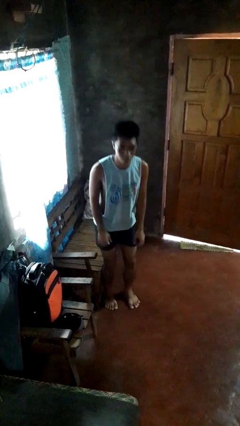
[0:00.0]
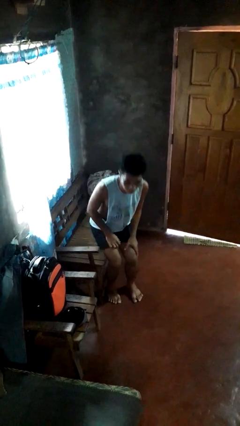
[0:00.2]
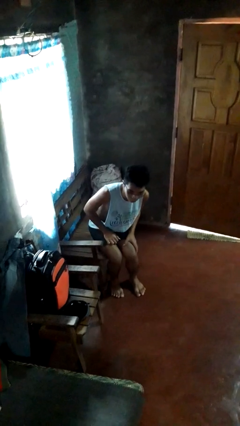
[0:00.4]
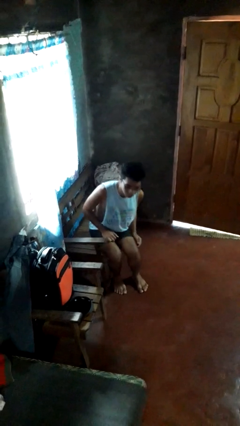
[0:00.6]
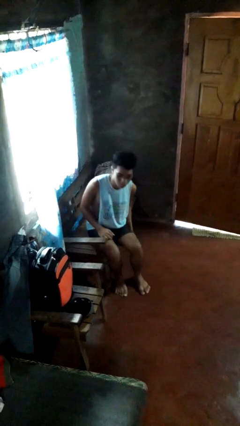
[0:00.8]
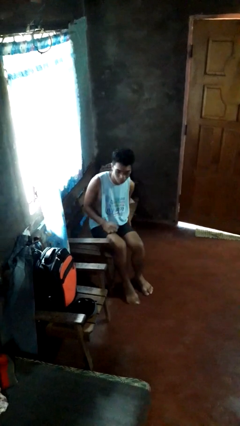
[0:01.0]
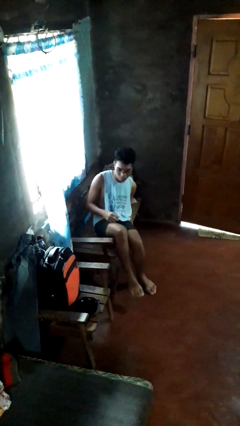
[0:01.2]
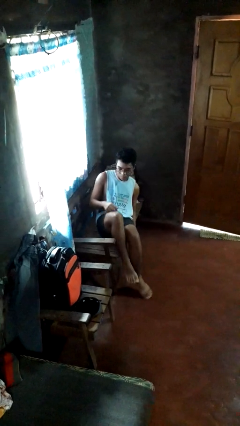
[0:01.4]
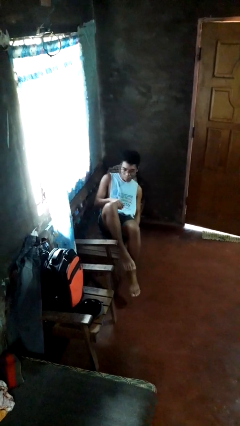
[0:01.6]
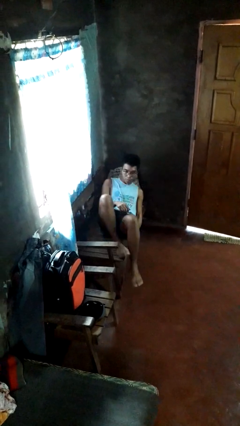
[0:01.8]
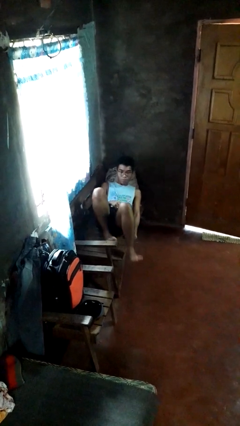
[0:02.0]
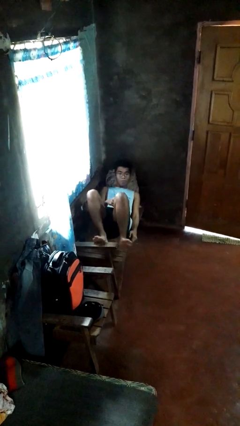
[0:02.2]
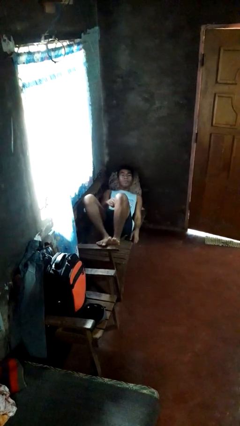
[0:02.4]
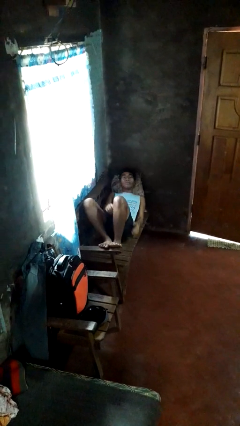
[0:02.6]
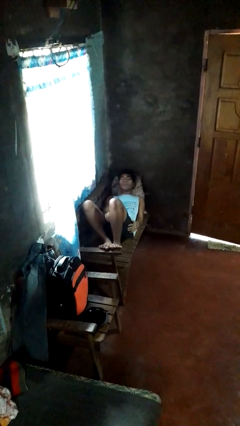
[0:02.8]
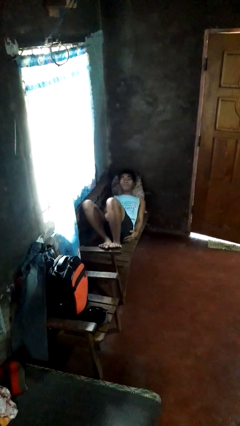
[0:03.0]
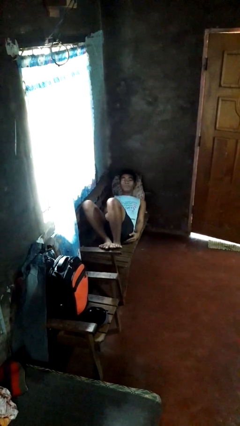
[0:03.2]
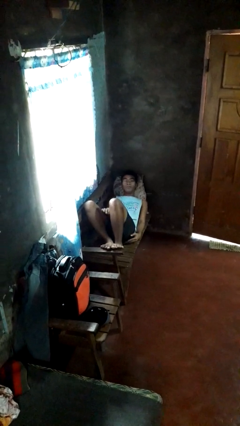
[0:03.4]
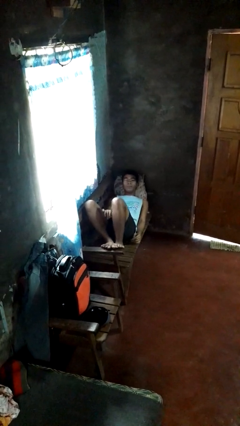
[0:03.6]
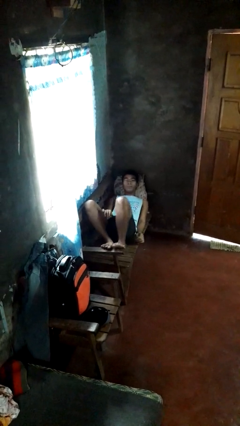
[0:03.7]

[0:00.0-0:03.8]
person lies down on couch

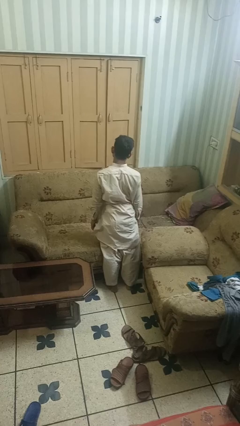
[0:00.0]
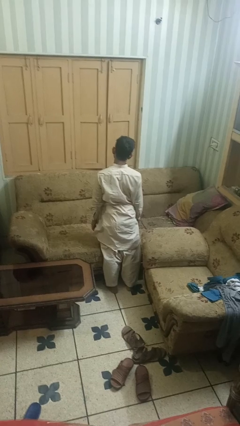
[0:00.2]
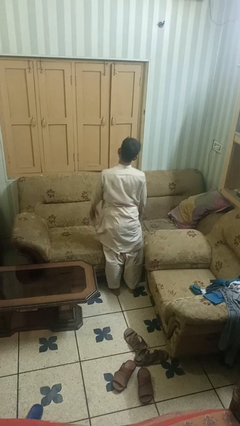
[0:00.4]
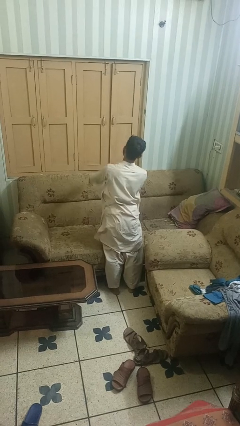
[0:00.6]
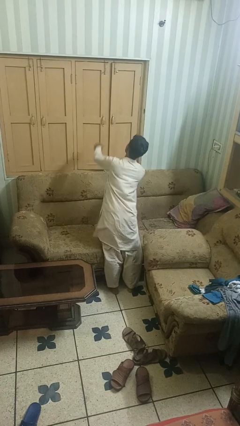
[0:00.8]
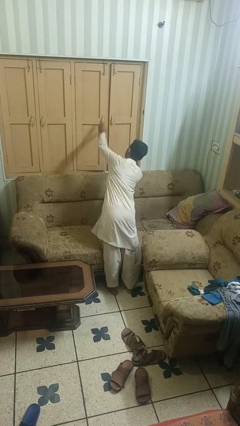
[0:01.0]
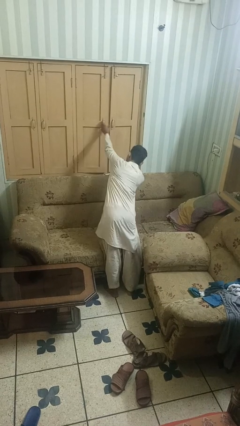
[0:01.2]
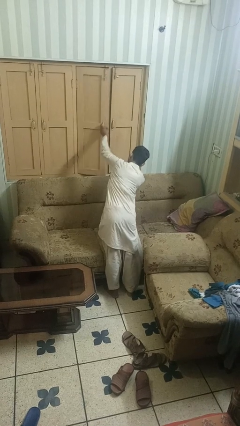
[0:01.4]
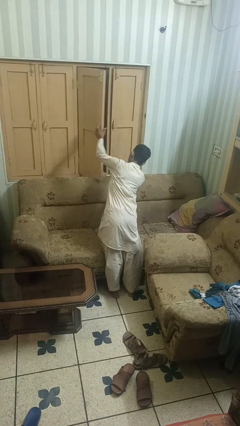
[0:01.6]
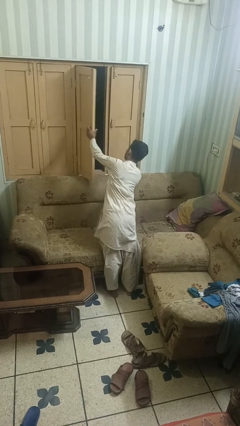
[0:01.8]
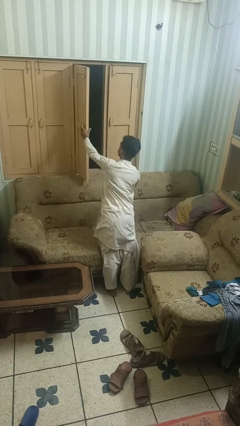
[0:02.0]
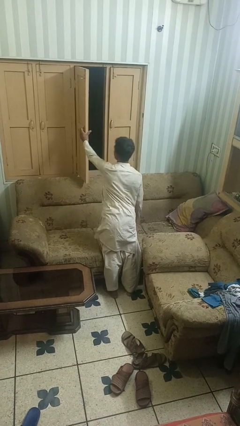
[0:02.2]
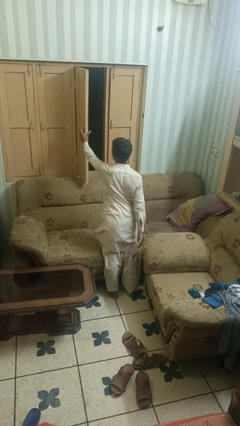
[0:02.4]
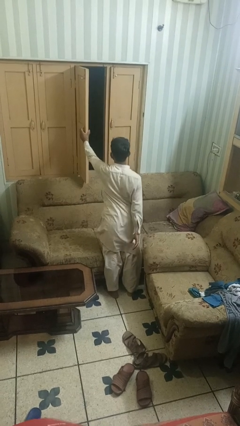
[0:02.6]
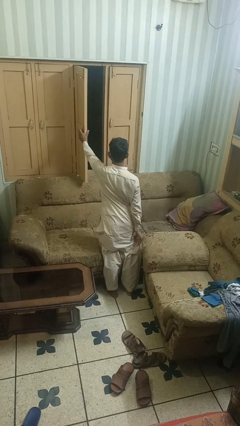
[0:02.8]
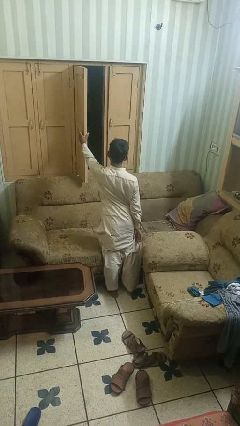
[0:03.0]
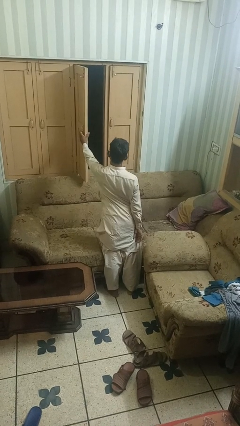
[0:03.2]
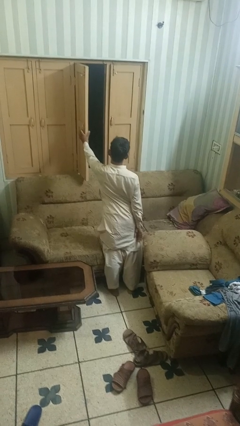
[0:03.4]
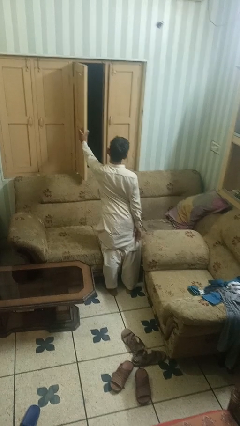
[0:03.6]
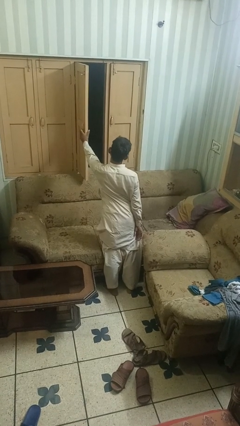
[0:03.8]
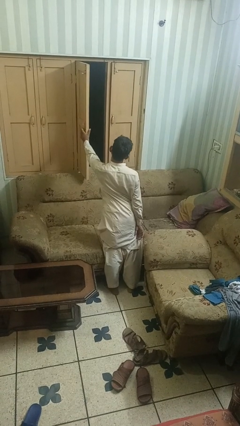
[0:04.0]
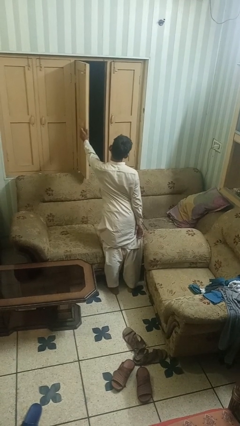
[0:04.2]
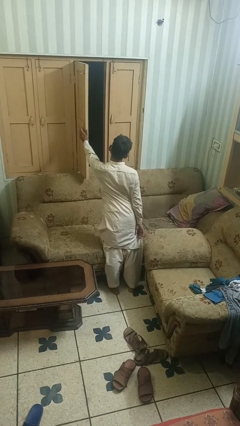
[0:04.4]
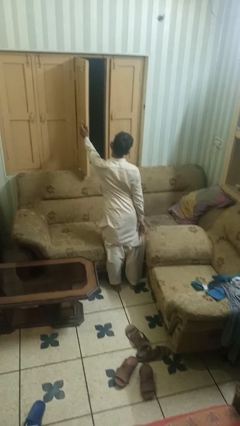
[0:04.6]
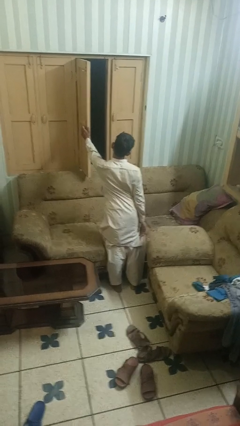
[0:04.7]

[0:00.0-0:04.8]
person opens home window

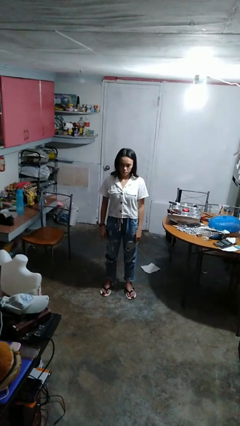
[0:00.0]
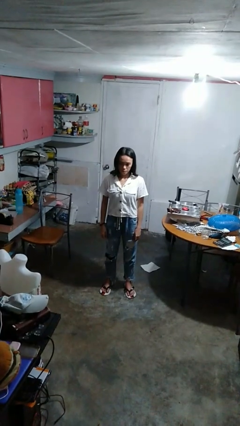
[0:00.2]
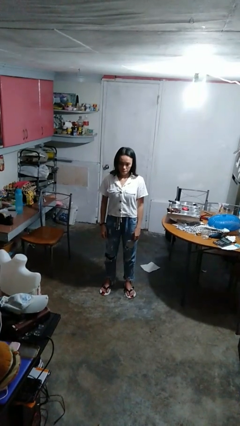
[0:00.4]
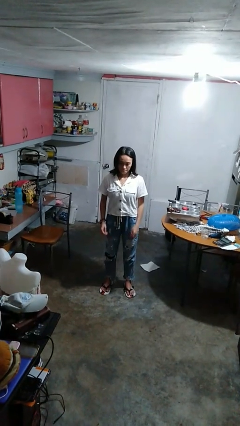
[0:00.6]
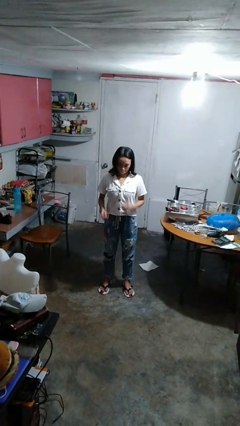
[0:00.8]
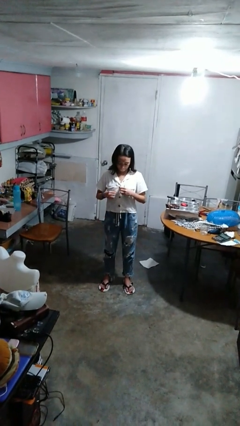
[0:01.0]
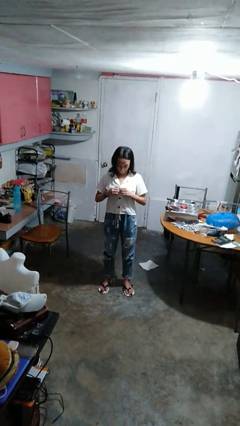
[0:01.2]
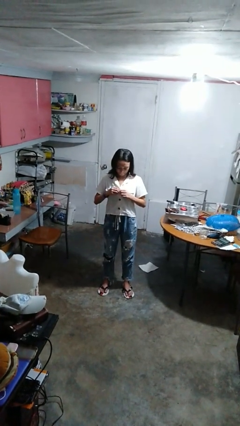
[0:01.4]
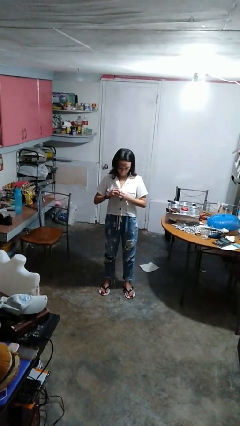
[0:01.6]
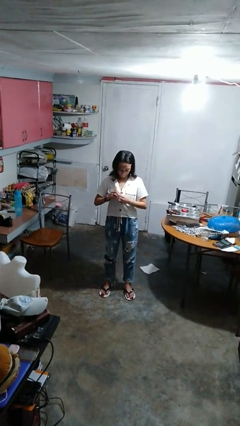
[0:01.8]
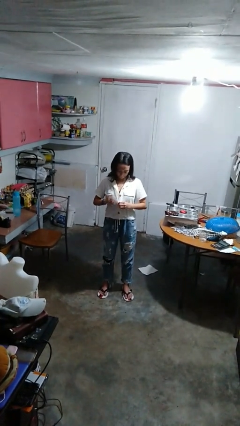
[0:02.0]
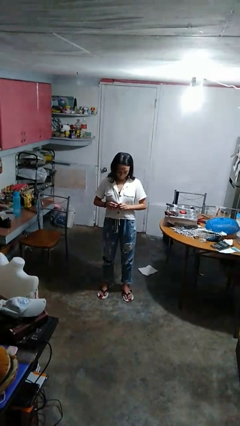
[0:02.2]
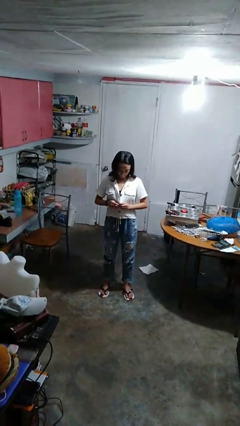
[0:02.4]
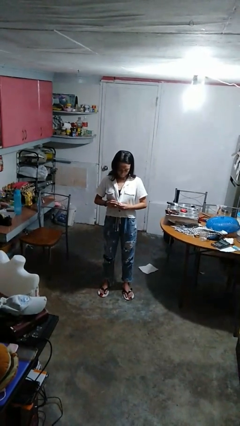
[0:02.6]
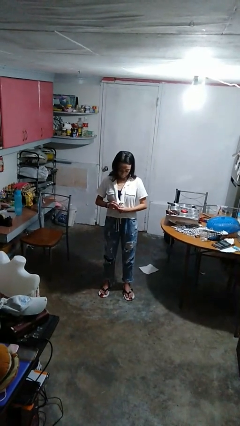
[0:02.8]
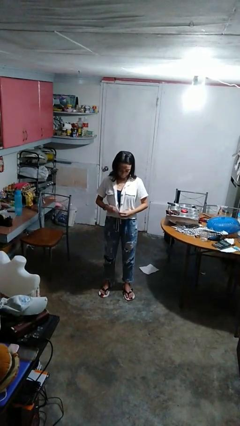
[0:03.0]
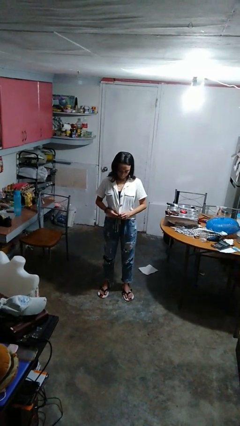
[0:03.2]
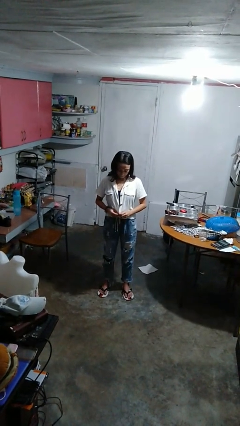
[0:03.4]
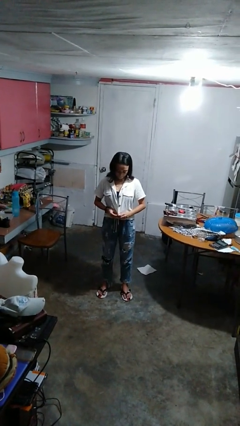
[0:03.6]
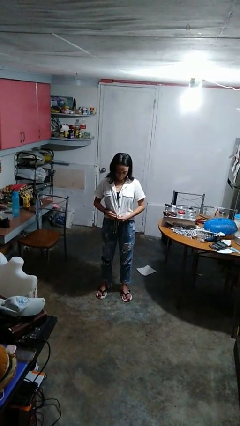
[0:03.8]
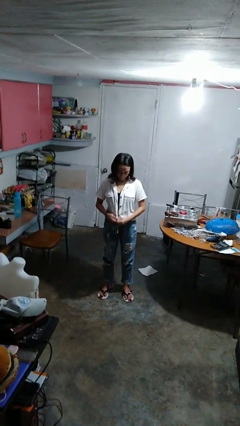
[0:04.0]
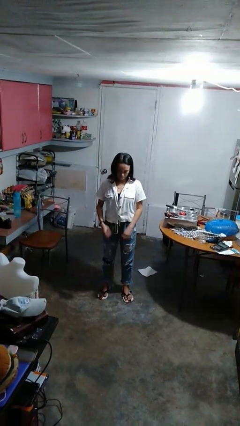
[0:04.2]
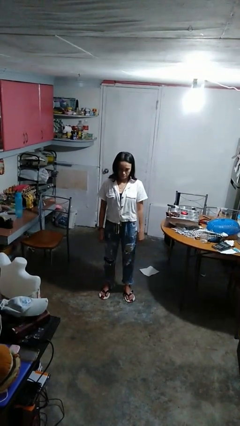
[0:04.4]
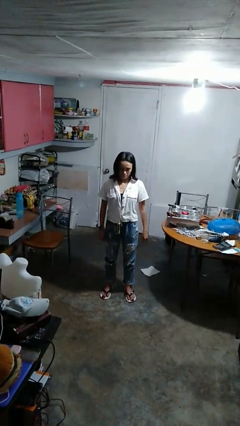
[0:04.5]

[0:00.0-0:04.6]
person unbuttons shirt

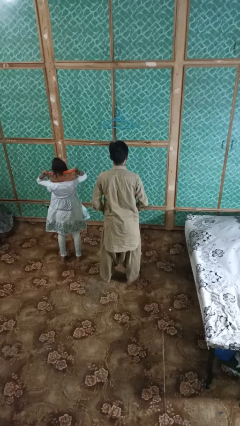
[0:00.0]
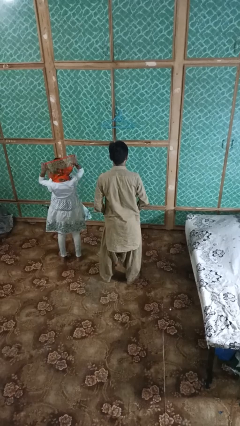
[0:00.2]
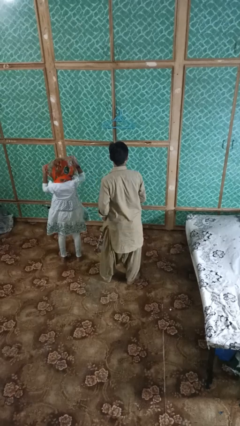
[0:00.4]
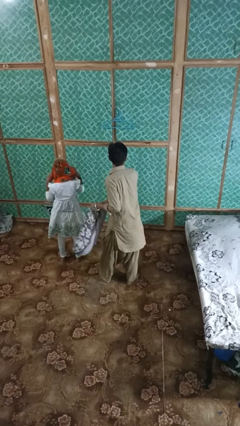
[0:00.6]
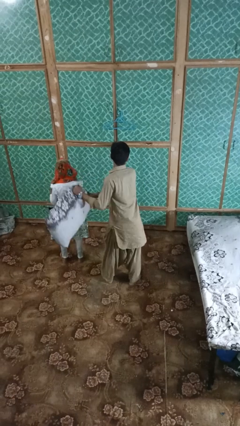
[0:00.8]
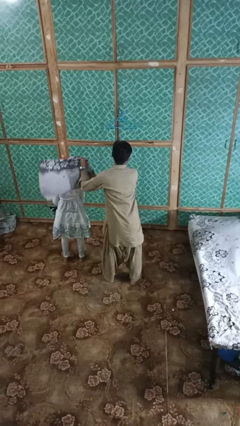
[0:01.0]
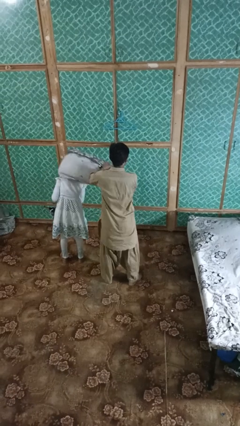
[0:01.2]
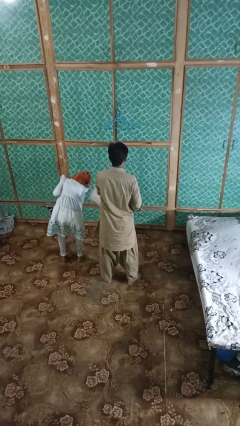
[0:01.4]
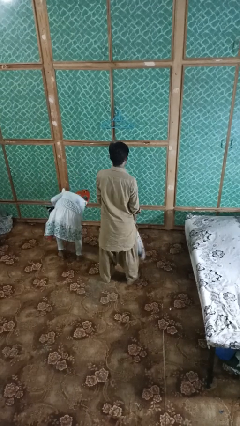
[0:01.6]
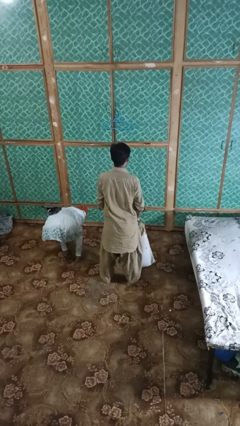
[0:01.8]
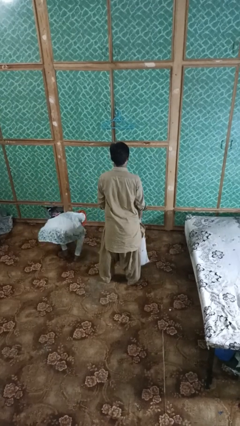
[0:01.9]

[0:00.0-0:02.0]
person hits person with pillow

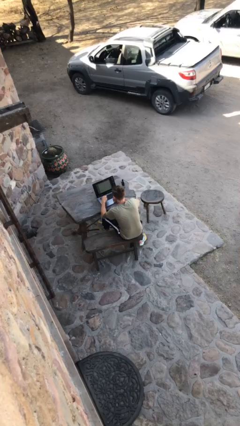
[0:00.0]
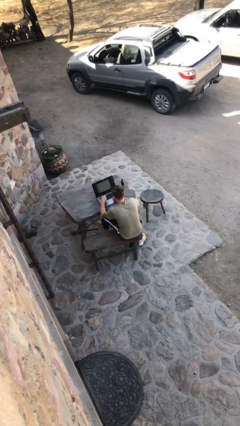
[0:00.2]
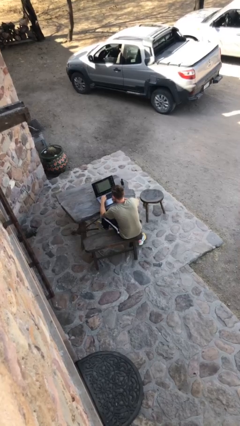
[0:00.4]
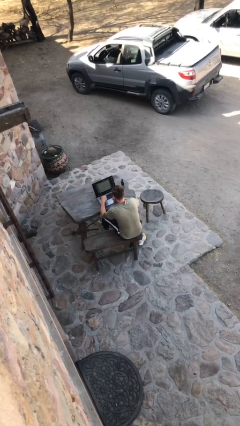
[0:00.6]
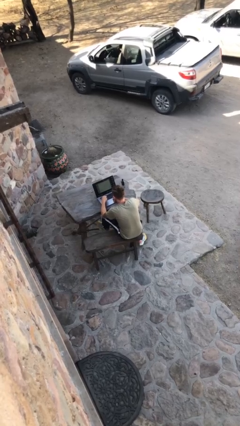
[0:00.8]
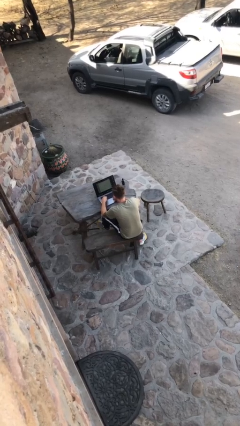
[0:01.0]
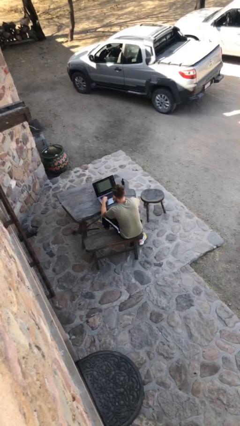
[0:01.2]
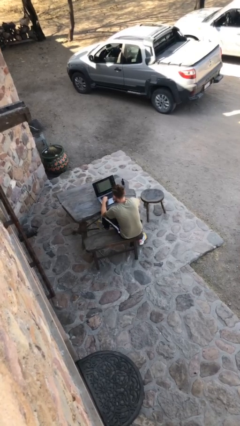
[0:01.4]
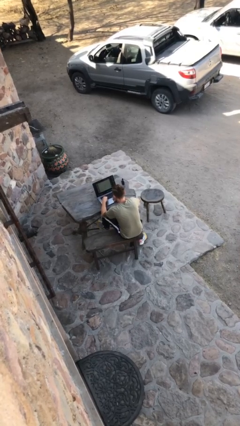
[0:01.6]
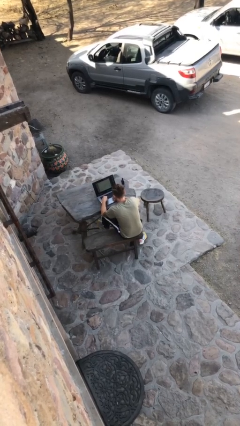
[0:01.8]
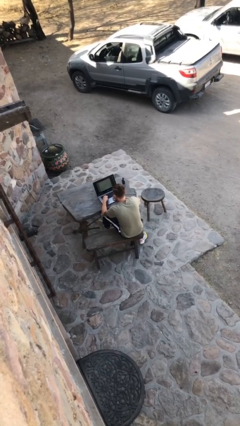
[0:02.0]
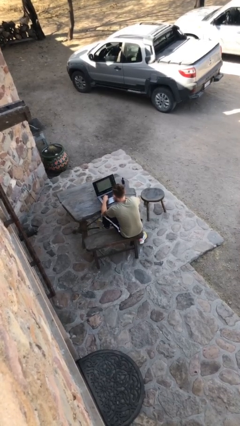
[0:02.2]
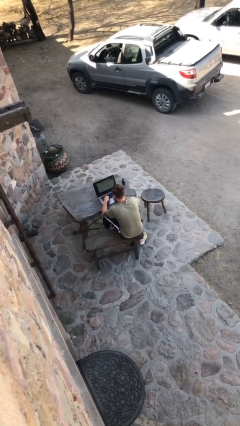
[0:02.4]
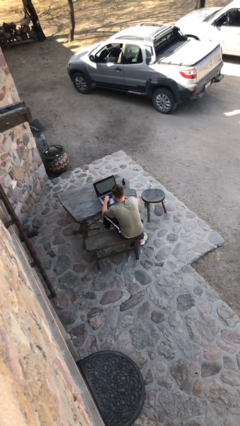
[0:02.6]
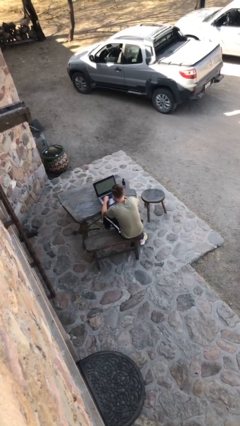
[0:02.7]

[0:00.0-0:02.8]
person interacts with laptop
